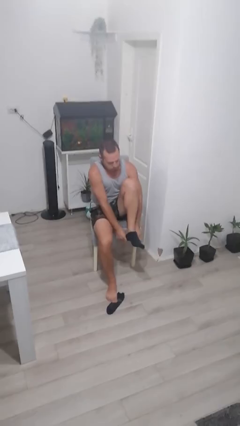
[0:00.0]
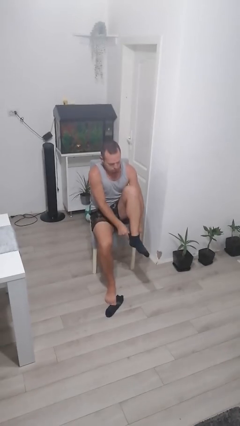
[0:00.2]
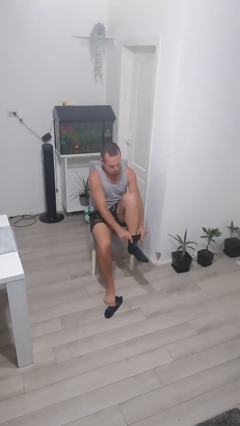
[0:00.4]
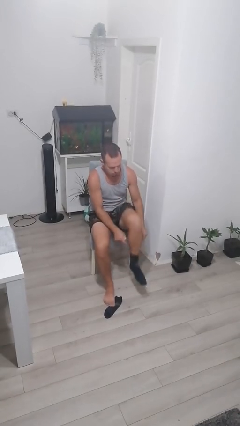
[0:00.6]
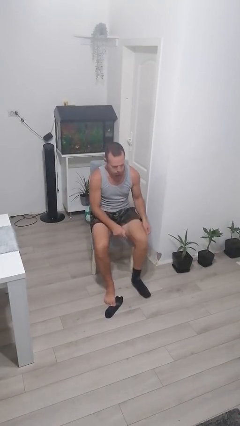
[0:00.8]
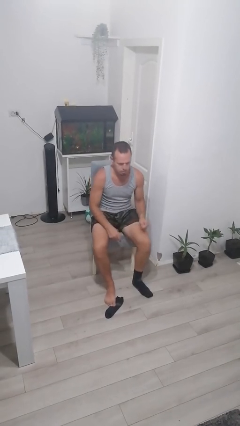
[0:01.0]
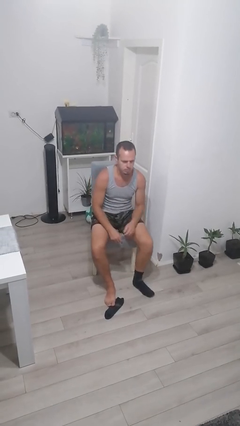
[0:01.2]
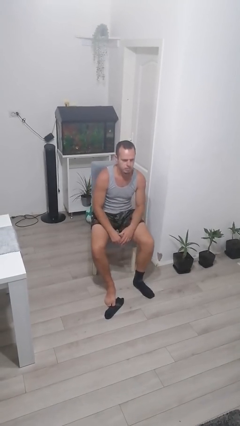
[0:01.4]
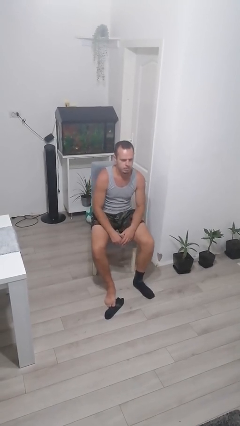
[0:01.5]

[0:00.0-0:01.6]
person takes off socks

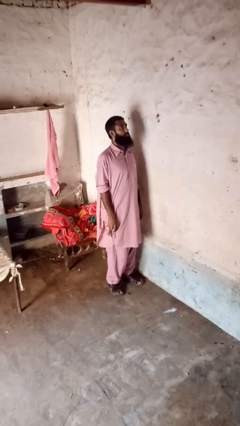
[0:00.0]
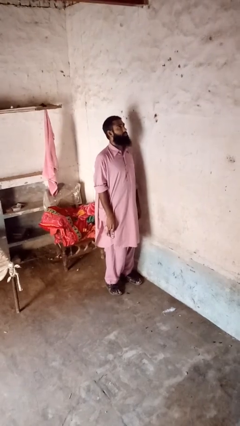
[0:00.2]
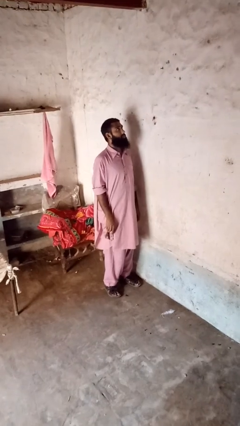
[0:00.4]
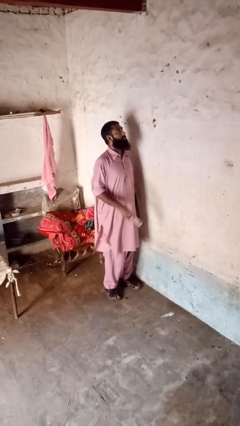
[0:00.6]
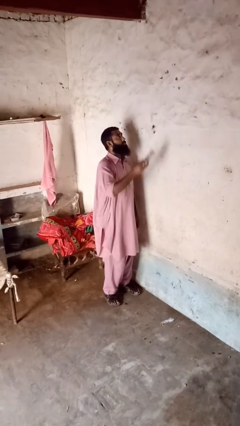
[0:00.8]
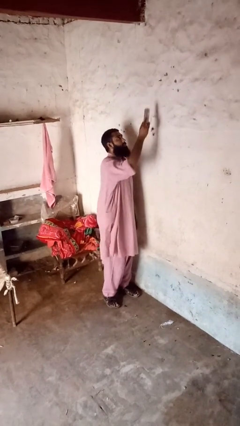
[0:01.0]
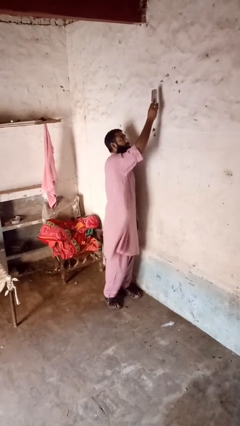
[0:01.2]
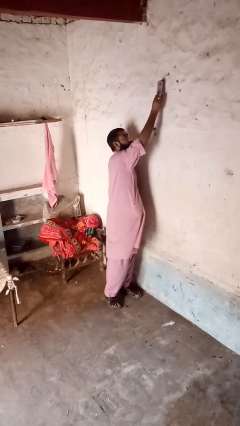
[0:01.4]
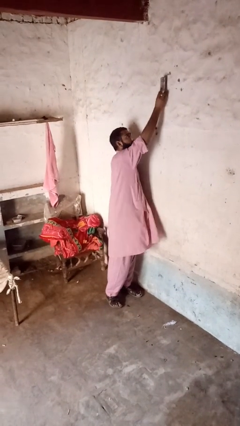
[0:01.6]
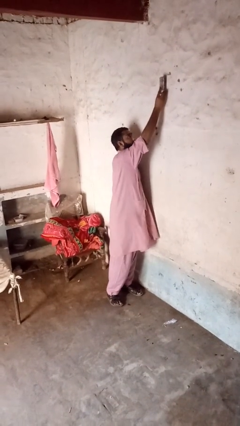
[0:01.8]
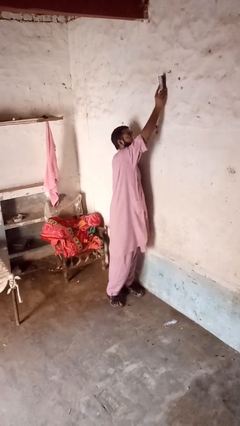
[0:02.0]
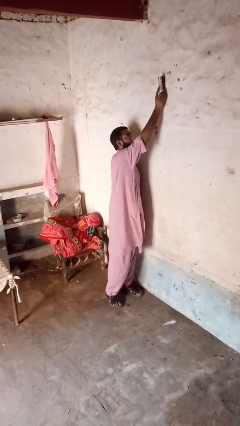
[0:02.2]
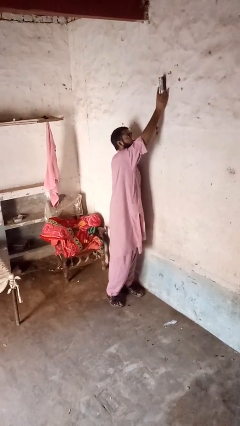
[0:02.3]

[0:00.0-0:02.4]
person adjusts thermostat

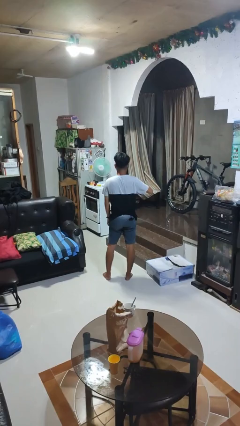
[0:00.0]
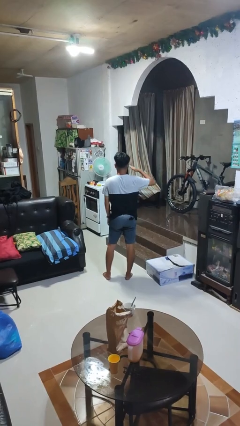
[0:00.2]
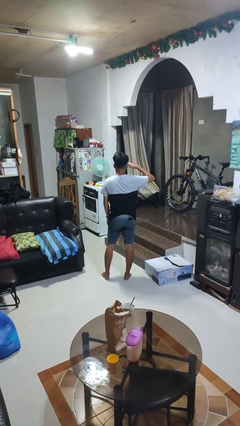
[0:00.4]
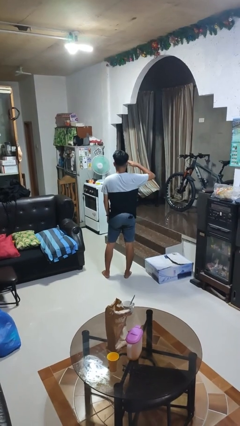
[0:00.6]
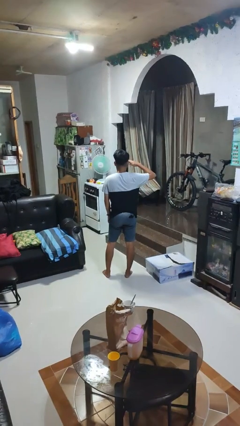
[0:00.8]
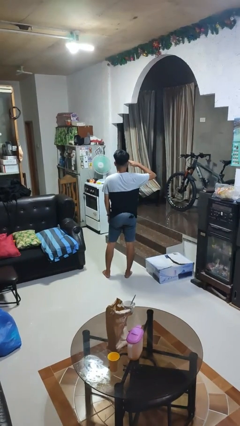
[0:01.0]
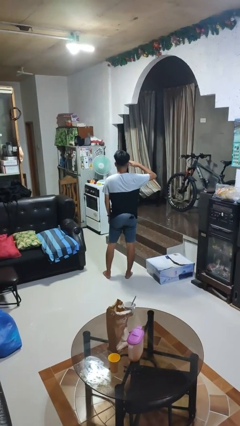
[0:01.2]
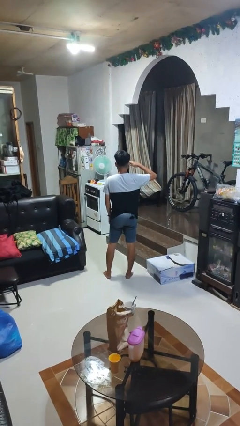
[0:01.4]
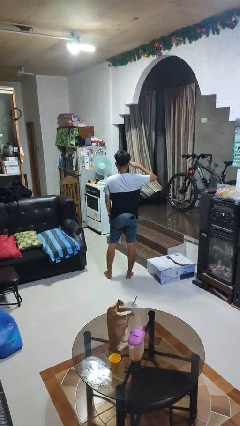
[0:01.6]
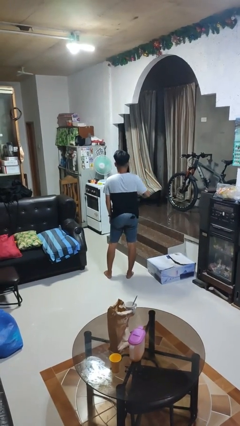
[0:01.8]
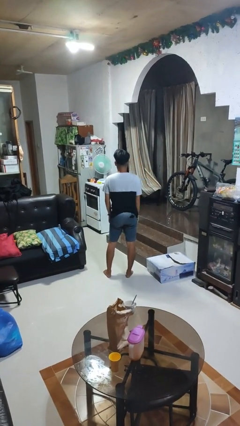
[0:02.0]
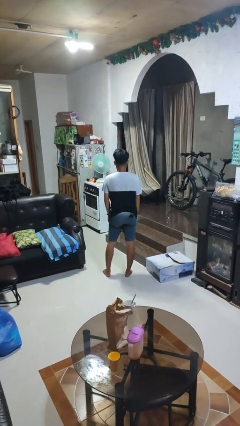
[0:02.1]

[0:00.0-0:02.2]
person salutes

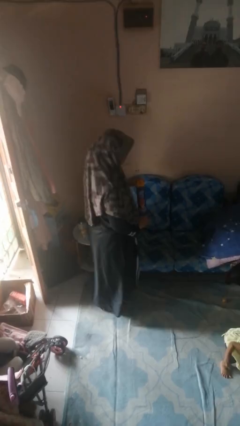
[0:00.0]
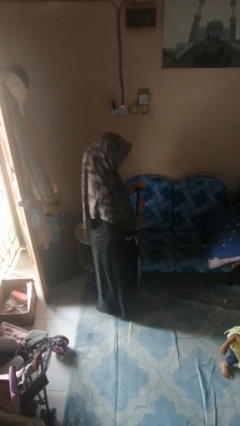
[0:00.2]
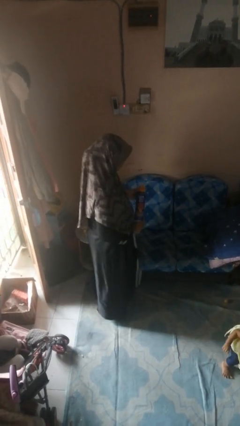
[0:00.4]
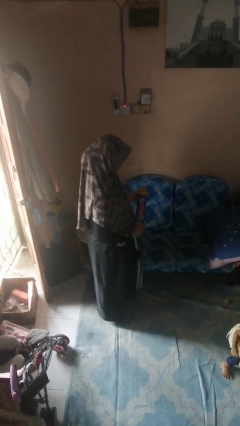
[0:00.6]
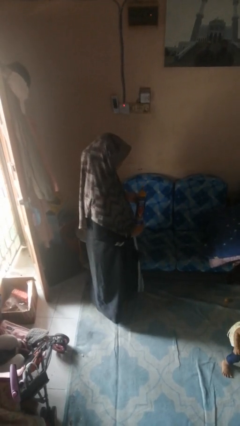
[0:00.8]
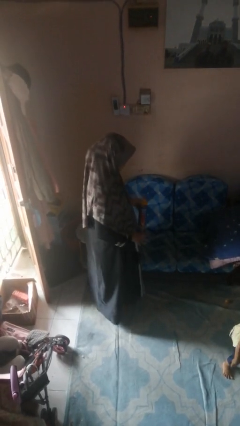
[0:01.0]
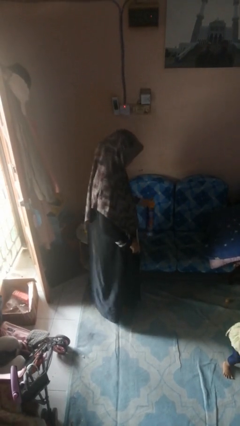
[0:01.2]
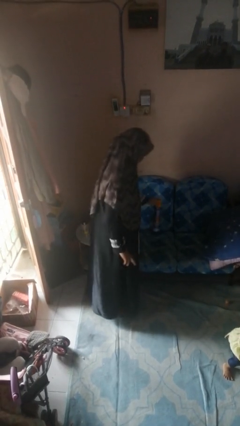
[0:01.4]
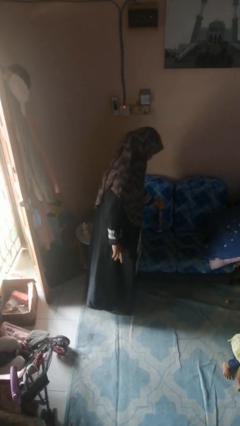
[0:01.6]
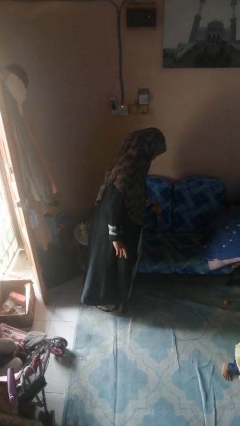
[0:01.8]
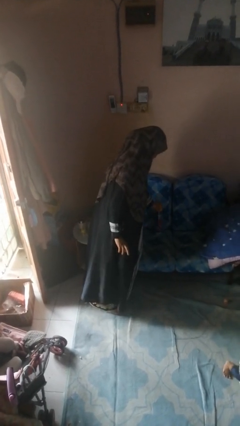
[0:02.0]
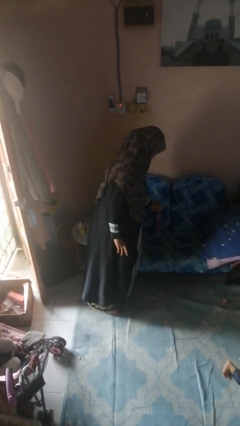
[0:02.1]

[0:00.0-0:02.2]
person puts down object on couch

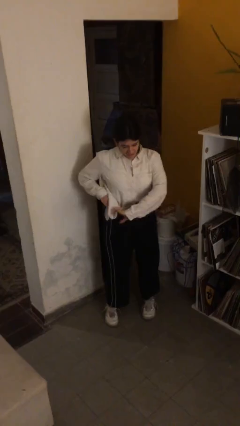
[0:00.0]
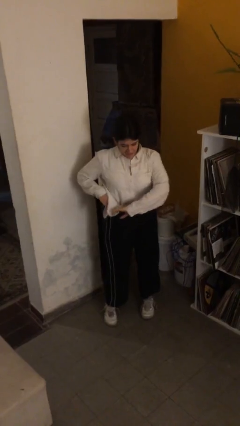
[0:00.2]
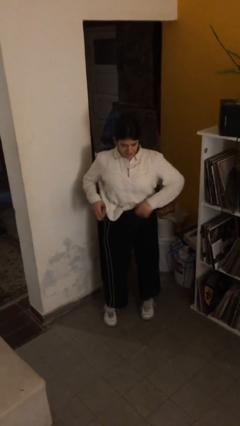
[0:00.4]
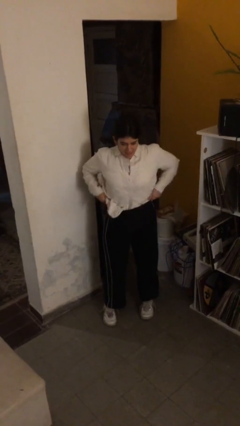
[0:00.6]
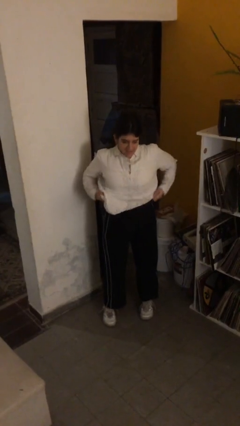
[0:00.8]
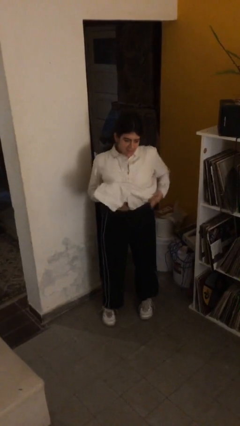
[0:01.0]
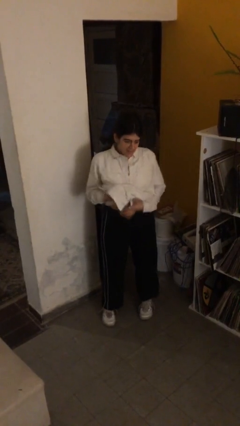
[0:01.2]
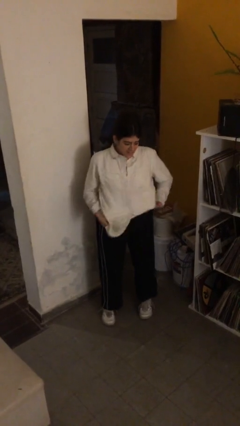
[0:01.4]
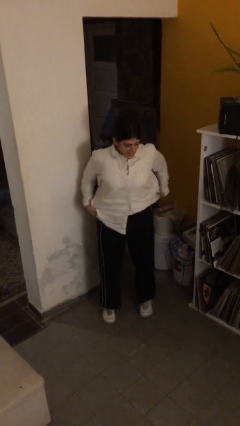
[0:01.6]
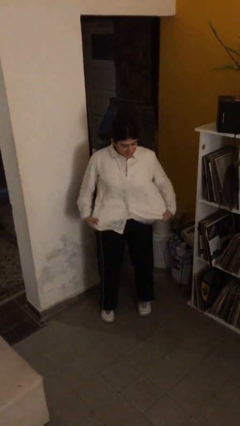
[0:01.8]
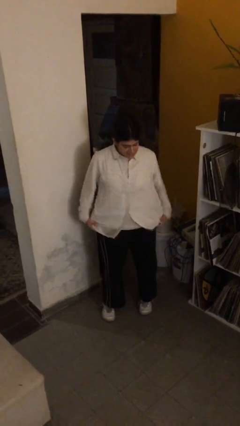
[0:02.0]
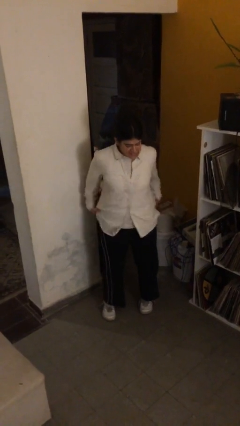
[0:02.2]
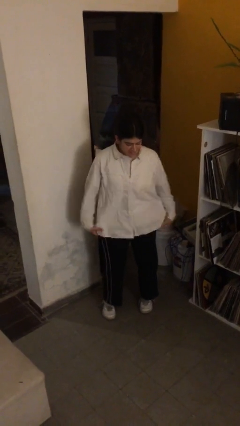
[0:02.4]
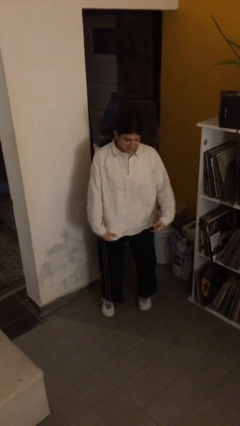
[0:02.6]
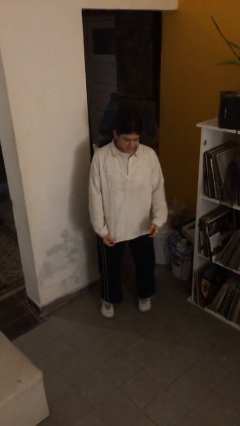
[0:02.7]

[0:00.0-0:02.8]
person untucks shirt

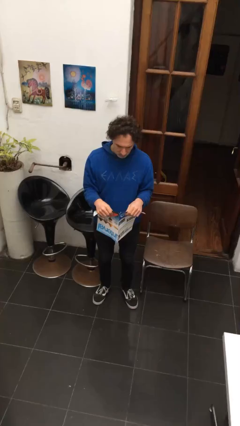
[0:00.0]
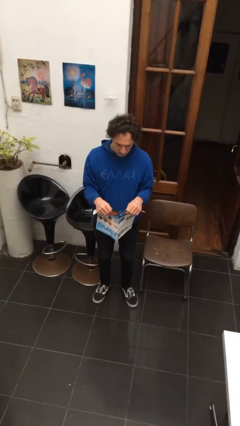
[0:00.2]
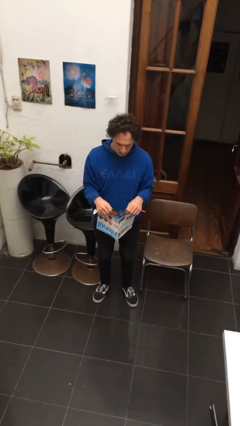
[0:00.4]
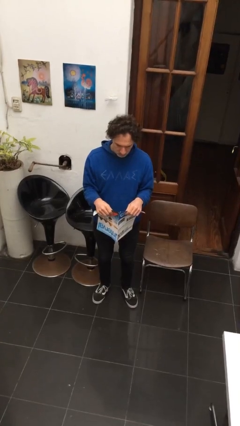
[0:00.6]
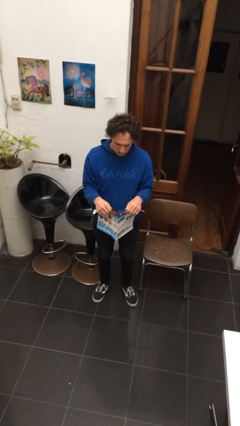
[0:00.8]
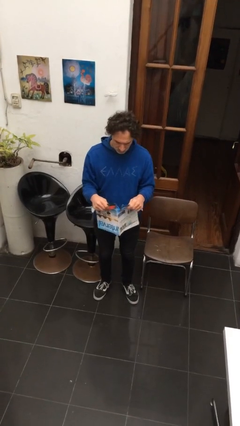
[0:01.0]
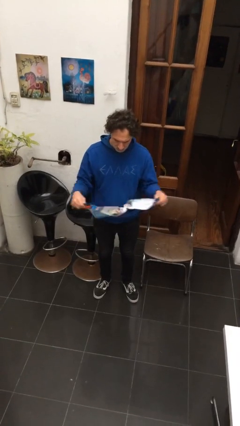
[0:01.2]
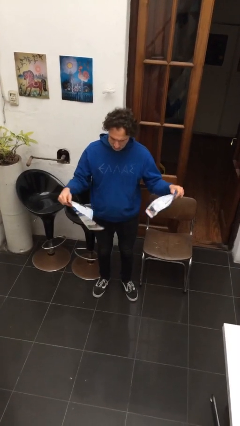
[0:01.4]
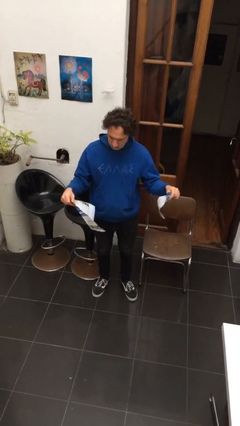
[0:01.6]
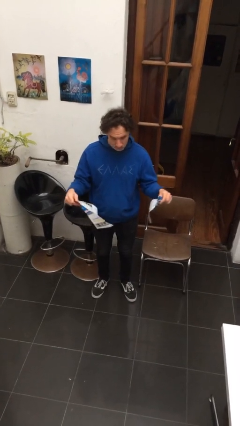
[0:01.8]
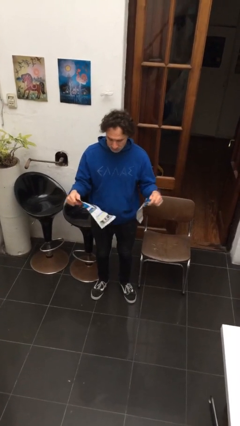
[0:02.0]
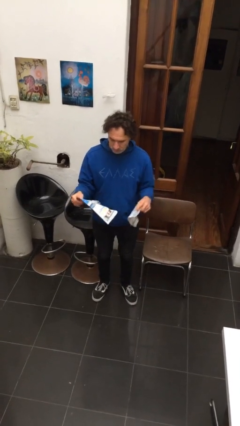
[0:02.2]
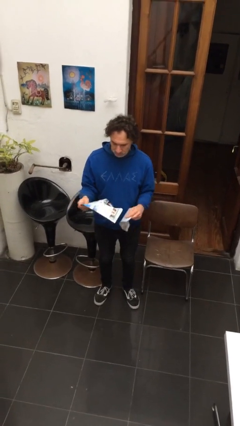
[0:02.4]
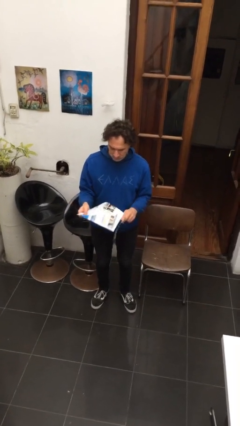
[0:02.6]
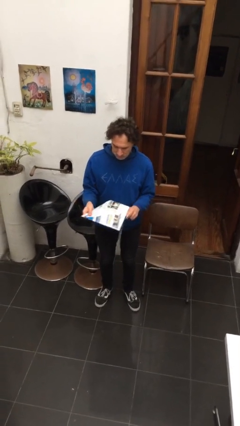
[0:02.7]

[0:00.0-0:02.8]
person tears paper

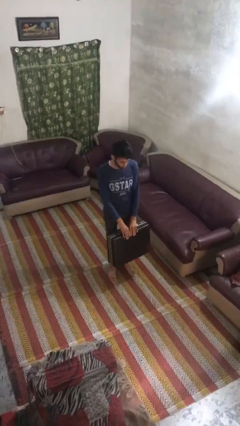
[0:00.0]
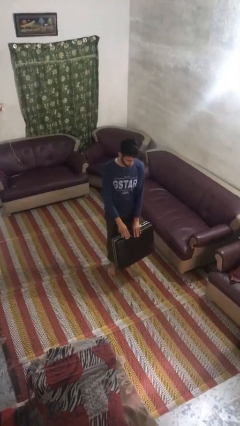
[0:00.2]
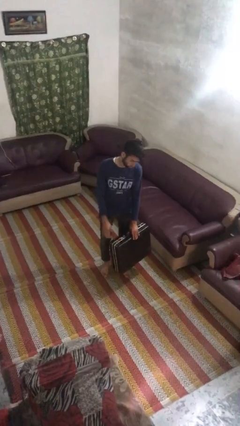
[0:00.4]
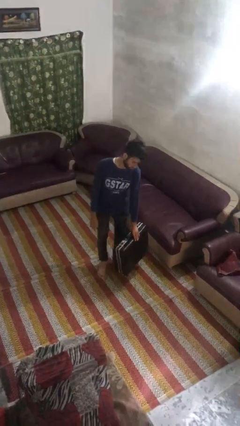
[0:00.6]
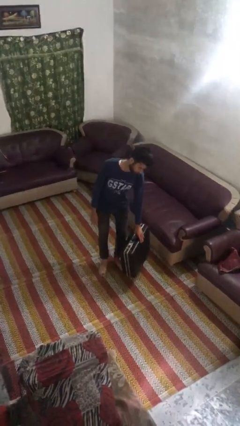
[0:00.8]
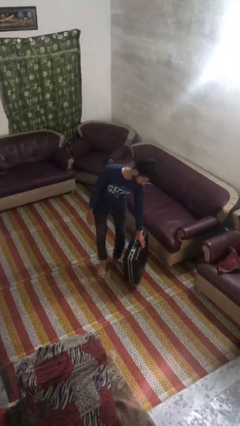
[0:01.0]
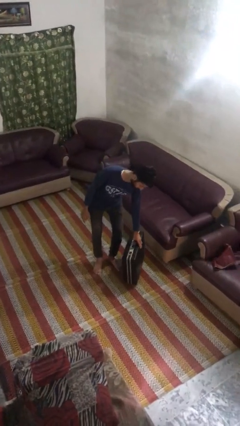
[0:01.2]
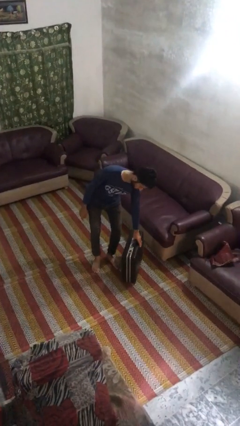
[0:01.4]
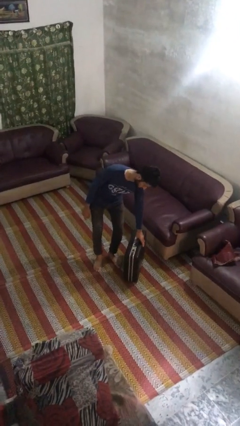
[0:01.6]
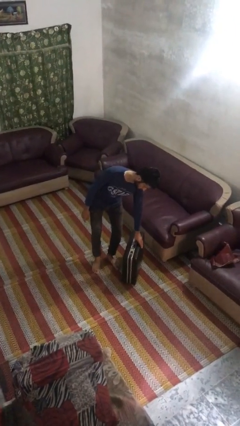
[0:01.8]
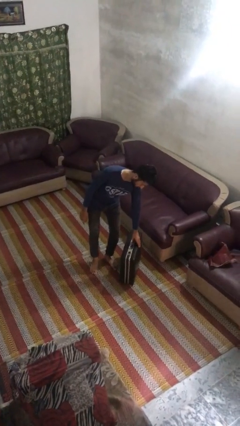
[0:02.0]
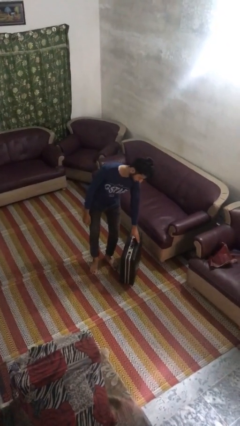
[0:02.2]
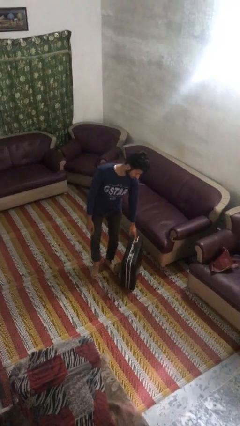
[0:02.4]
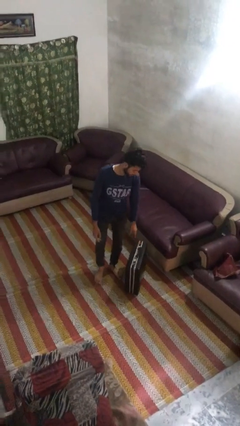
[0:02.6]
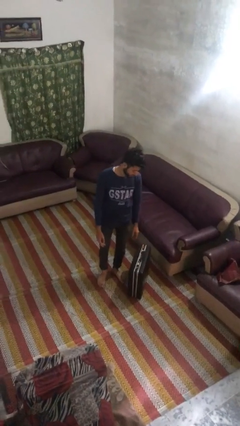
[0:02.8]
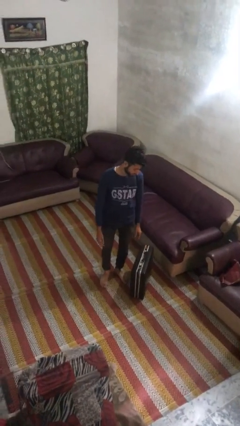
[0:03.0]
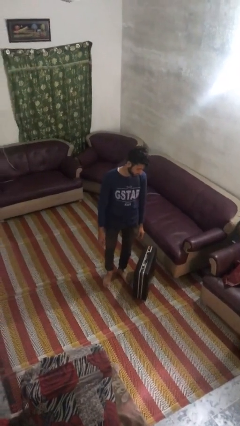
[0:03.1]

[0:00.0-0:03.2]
person puts down object on floor
